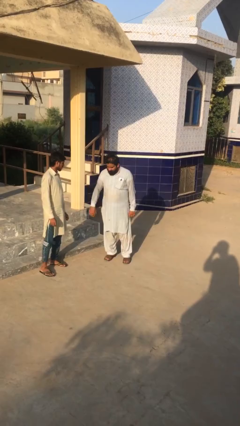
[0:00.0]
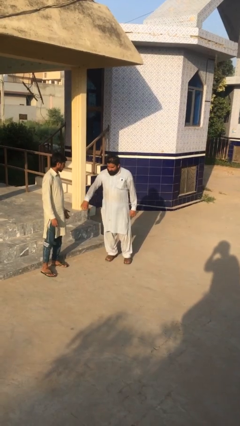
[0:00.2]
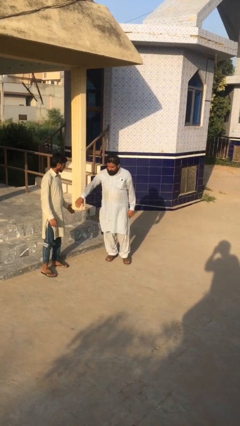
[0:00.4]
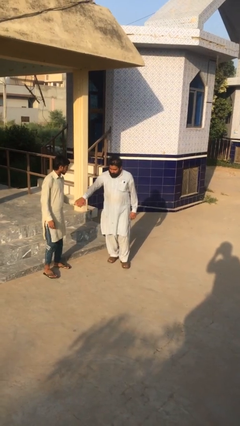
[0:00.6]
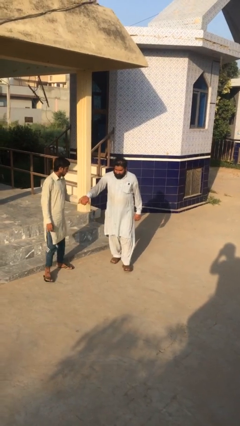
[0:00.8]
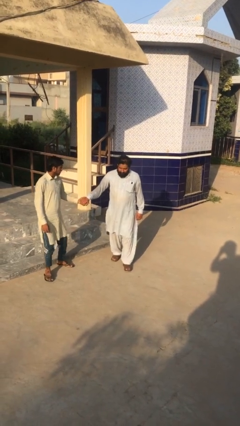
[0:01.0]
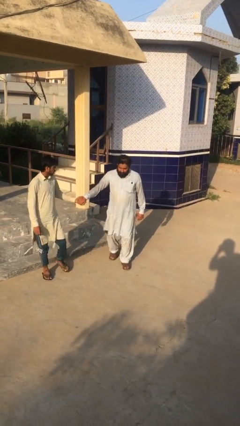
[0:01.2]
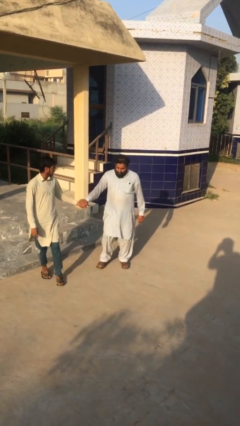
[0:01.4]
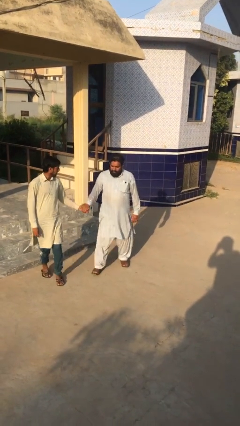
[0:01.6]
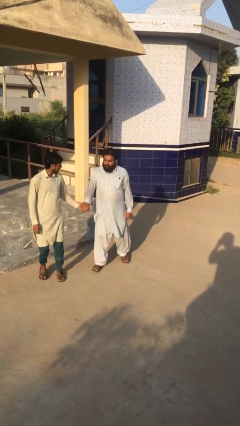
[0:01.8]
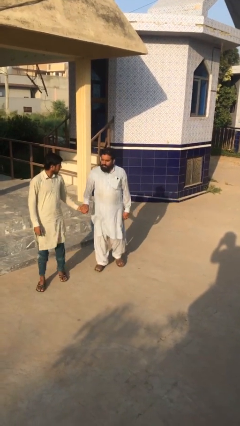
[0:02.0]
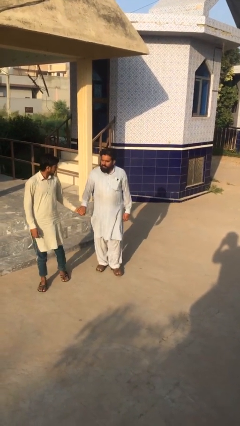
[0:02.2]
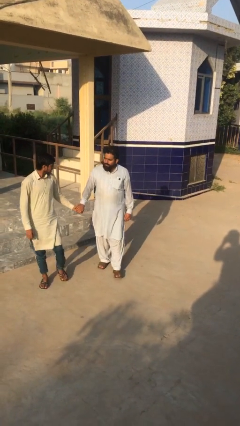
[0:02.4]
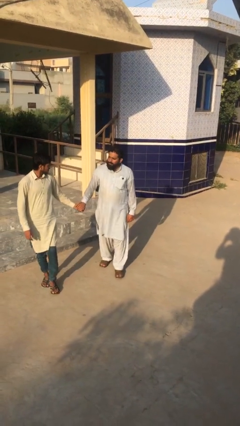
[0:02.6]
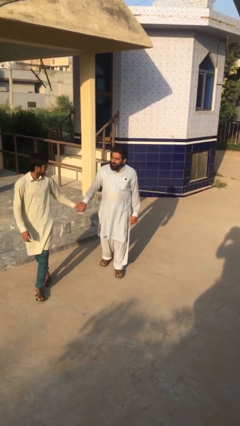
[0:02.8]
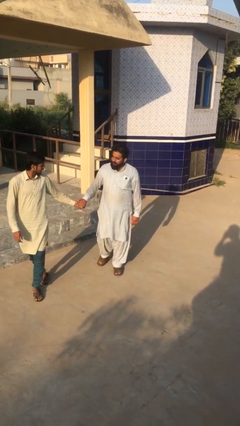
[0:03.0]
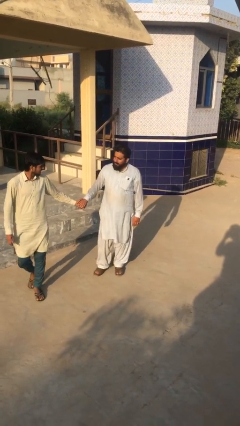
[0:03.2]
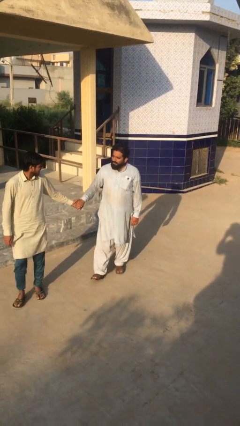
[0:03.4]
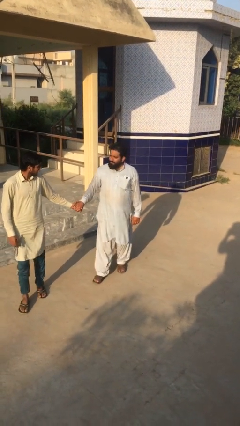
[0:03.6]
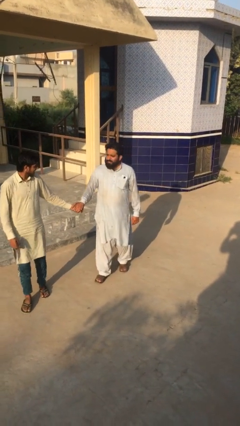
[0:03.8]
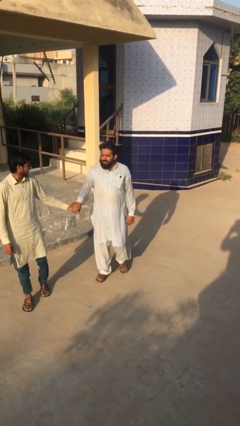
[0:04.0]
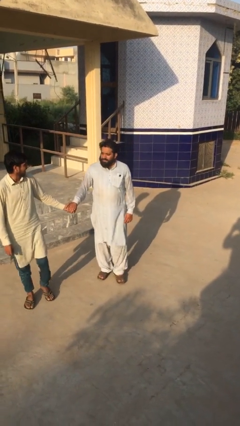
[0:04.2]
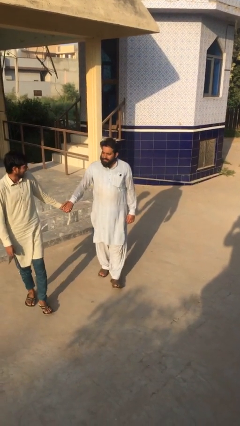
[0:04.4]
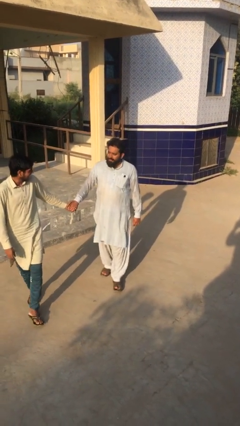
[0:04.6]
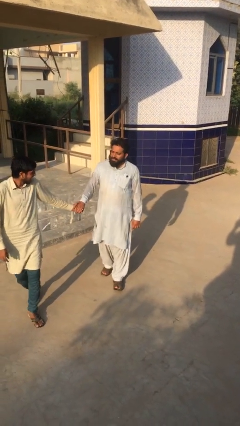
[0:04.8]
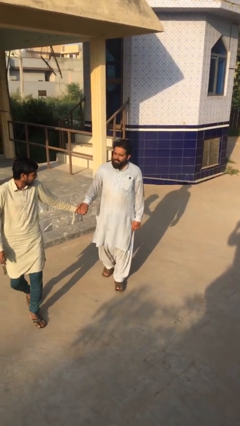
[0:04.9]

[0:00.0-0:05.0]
person holds hand

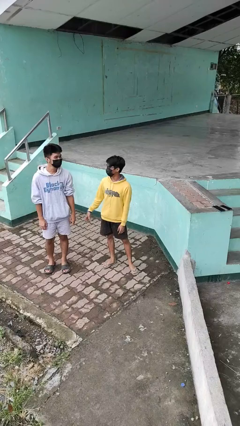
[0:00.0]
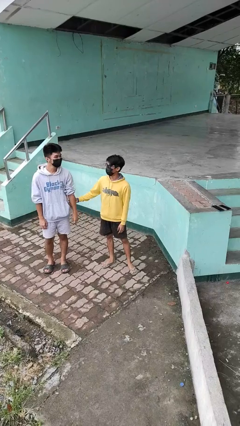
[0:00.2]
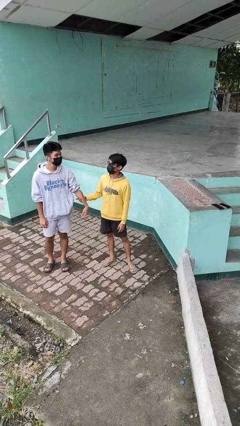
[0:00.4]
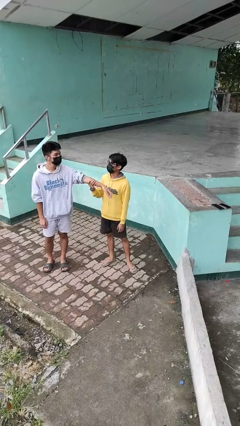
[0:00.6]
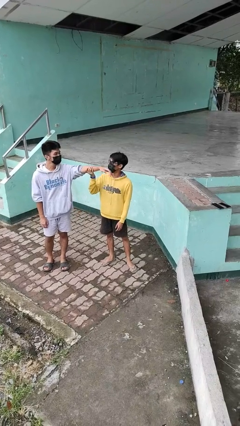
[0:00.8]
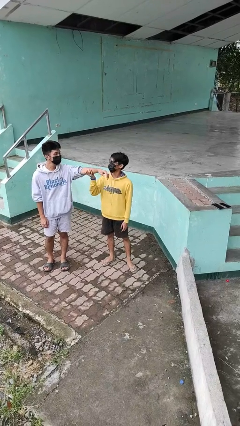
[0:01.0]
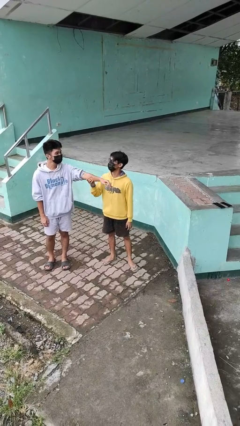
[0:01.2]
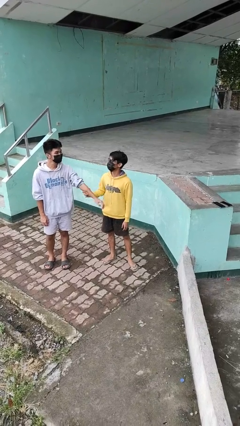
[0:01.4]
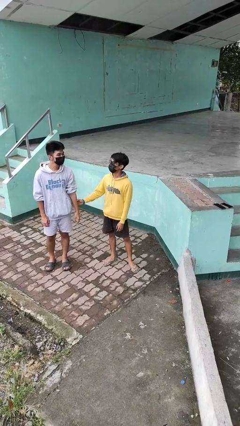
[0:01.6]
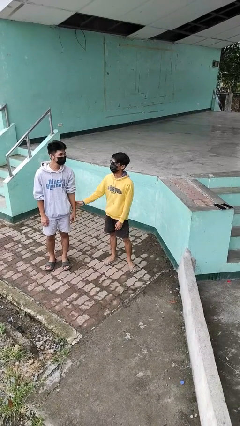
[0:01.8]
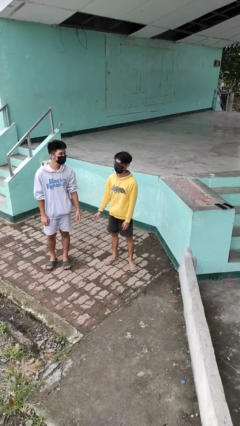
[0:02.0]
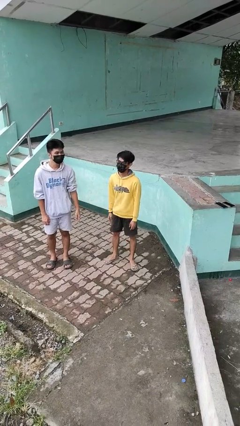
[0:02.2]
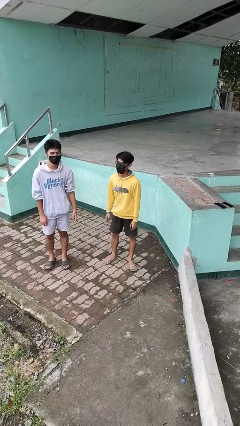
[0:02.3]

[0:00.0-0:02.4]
person grabs person by forearm

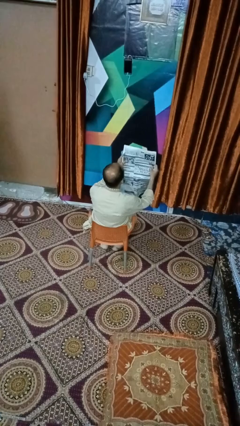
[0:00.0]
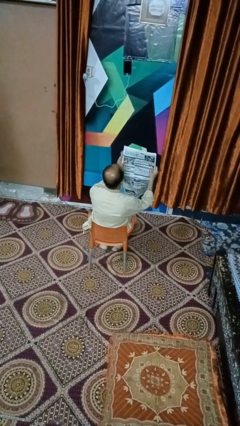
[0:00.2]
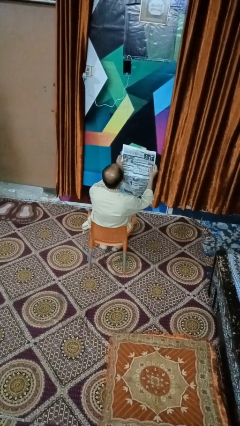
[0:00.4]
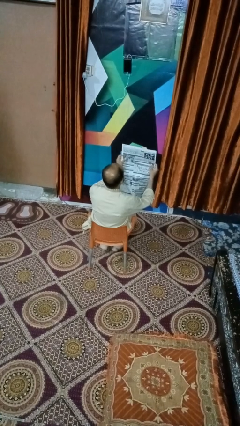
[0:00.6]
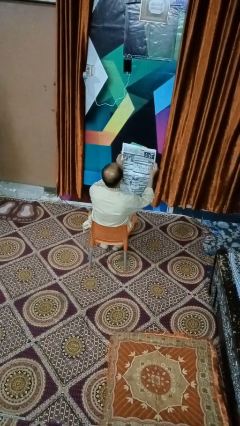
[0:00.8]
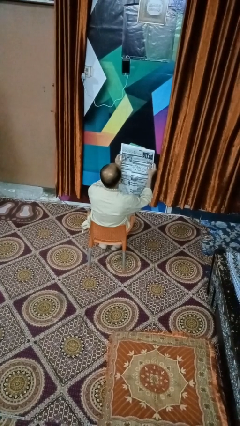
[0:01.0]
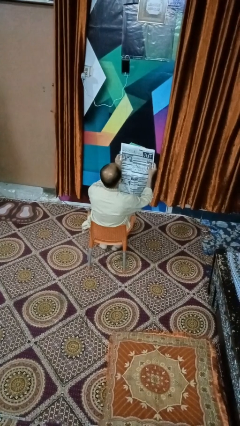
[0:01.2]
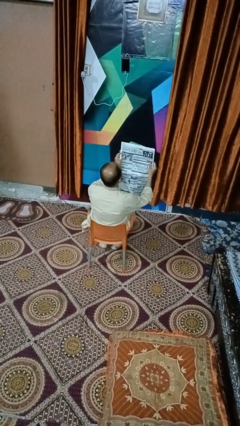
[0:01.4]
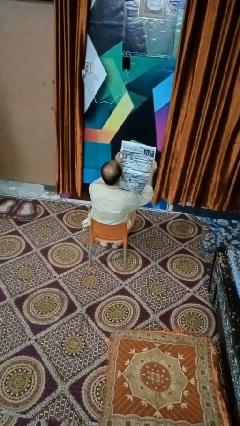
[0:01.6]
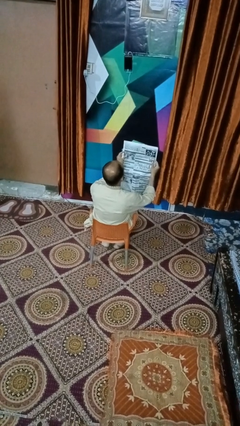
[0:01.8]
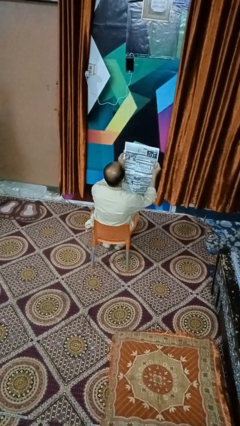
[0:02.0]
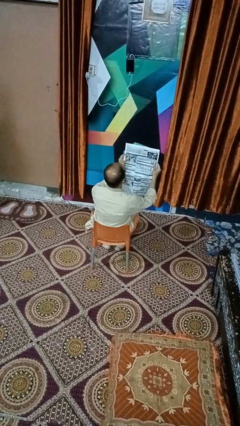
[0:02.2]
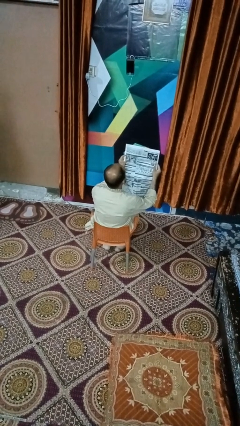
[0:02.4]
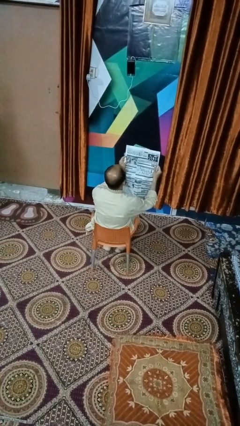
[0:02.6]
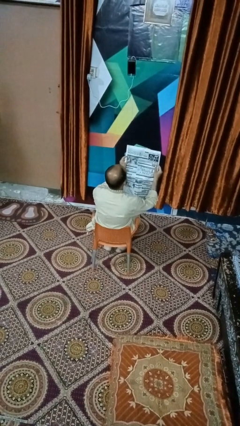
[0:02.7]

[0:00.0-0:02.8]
person reads newspaper

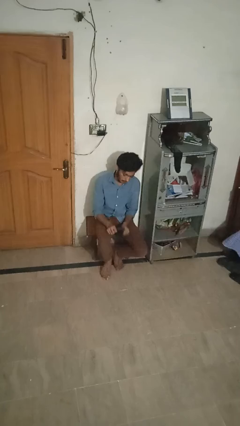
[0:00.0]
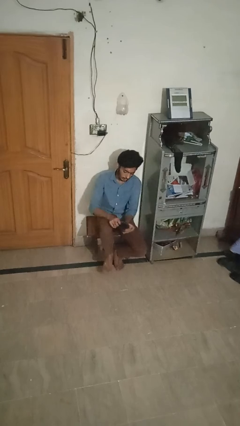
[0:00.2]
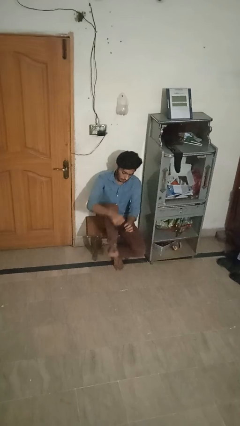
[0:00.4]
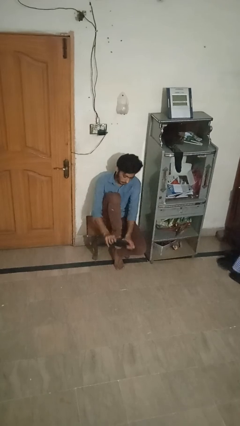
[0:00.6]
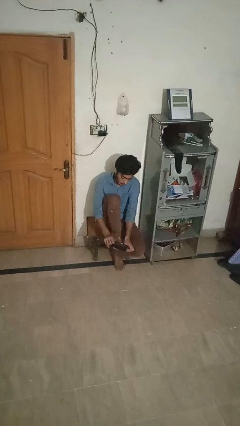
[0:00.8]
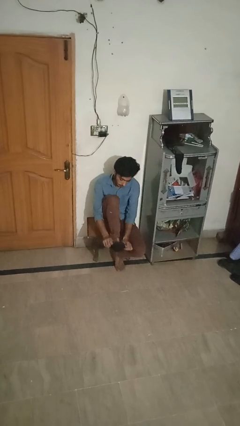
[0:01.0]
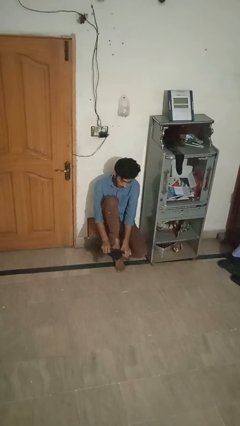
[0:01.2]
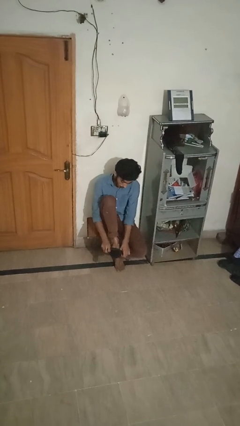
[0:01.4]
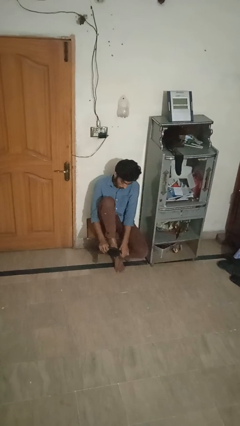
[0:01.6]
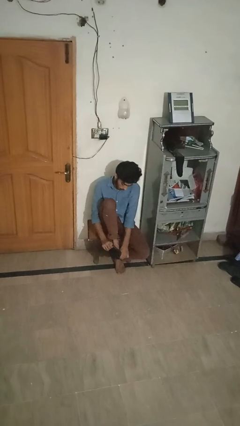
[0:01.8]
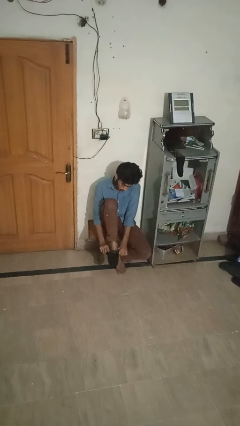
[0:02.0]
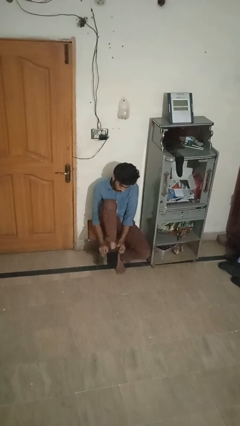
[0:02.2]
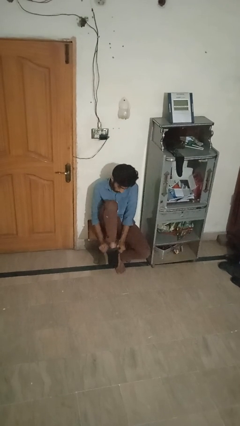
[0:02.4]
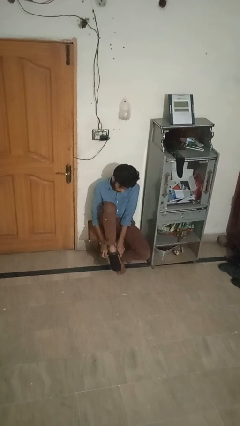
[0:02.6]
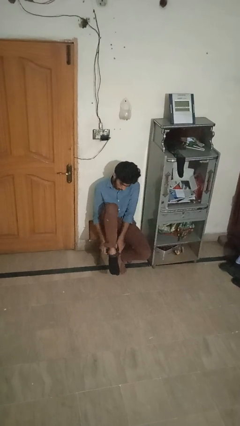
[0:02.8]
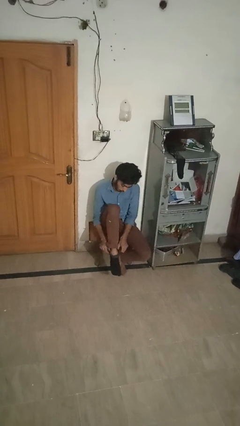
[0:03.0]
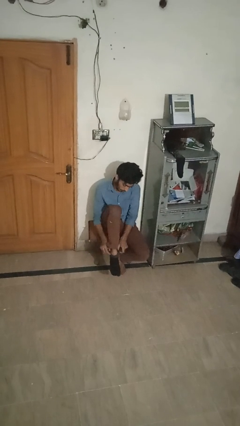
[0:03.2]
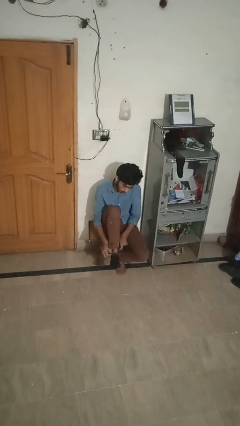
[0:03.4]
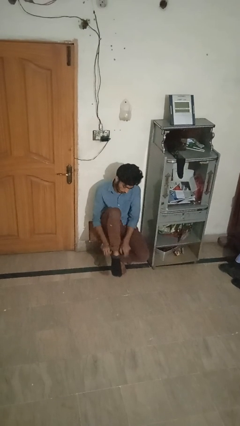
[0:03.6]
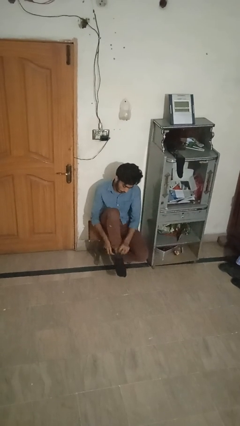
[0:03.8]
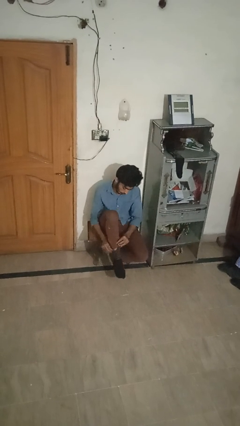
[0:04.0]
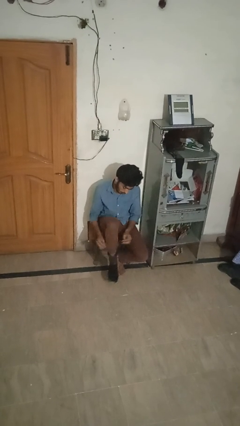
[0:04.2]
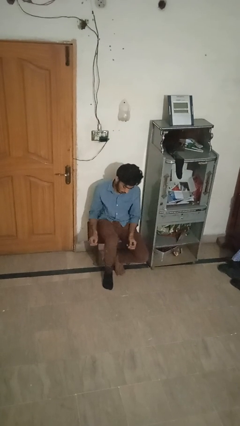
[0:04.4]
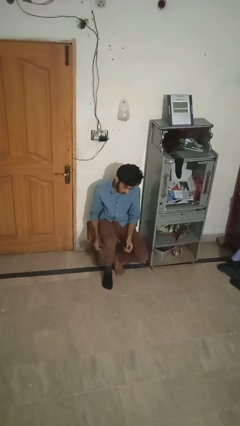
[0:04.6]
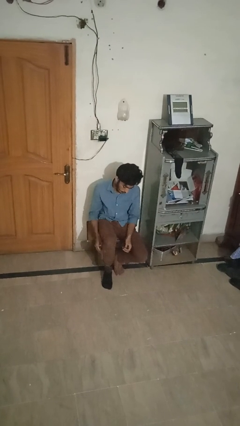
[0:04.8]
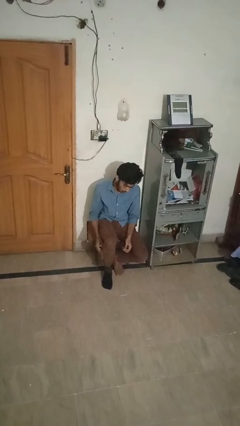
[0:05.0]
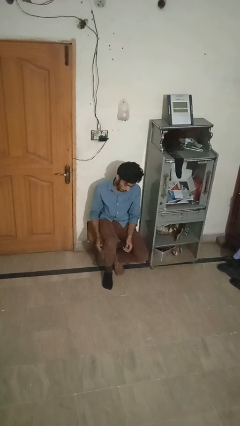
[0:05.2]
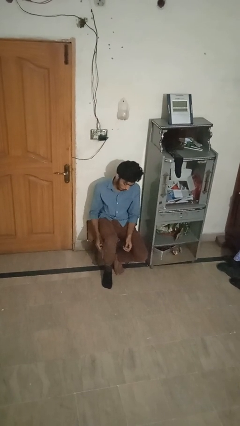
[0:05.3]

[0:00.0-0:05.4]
person puts on socks

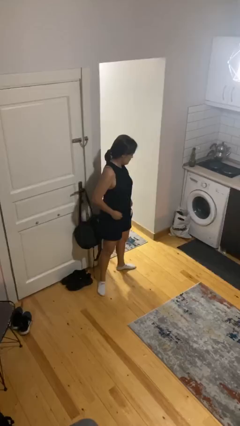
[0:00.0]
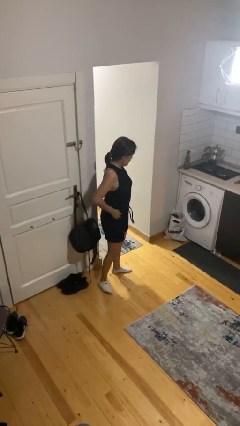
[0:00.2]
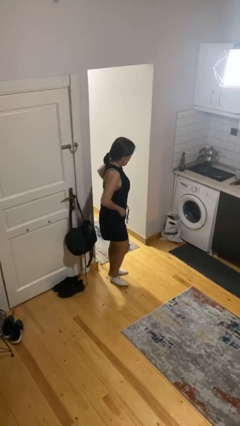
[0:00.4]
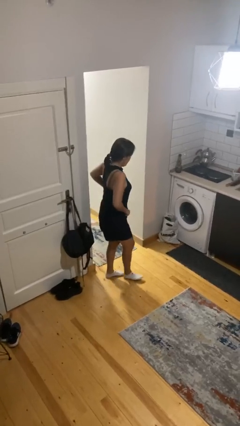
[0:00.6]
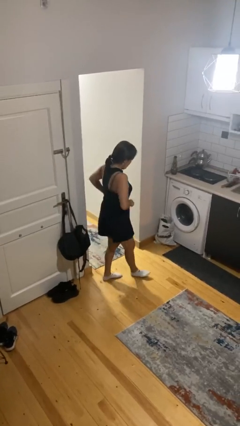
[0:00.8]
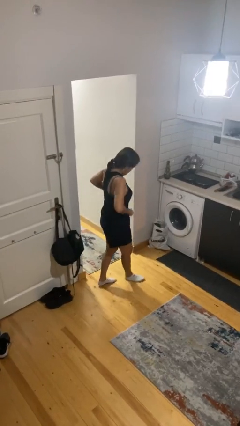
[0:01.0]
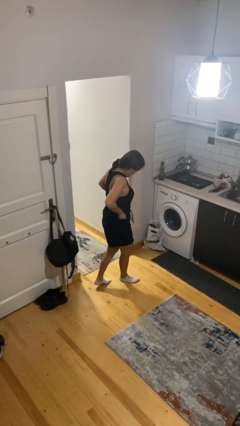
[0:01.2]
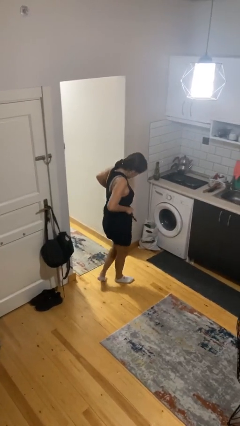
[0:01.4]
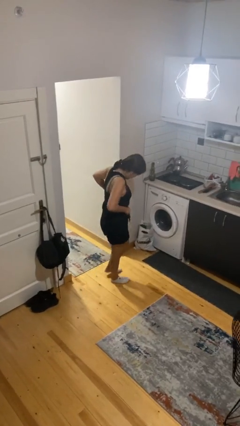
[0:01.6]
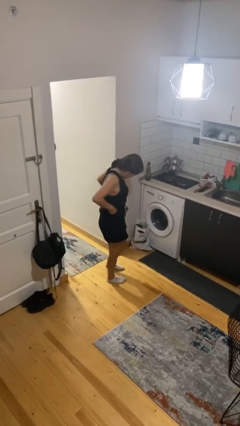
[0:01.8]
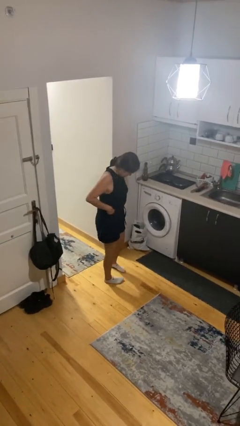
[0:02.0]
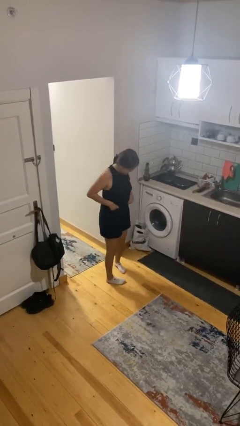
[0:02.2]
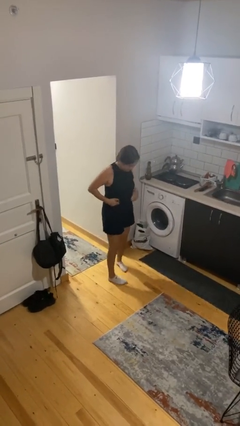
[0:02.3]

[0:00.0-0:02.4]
person hikes up pants
